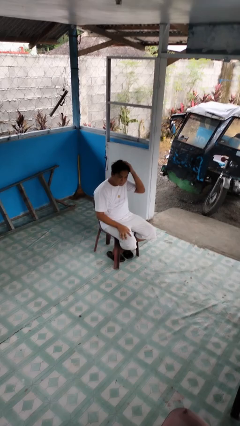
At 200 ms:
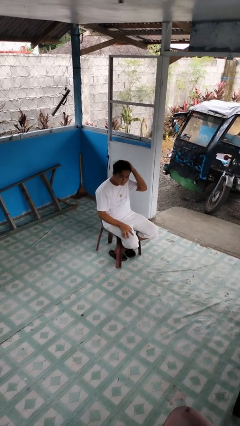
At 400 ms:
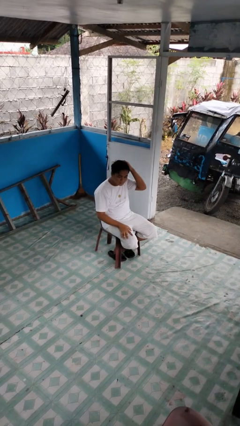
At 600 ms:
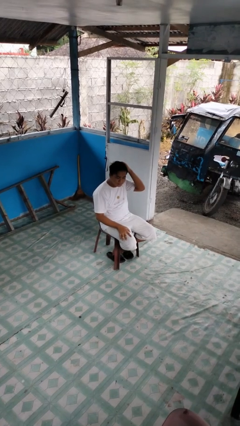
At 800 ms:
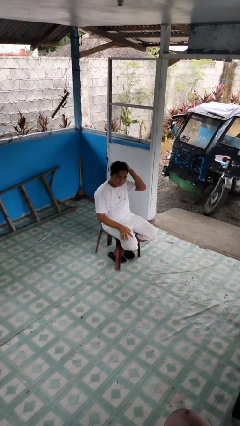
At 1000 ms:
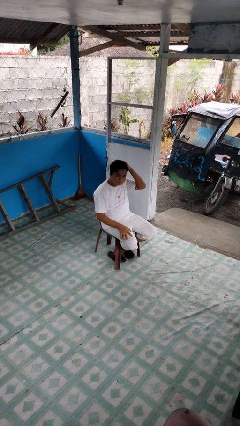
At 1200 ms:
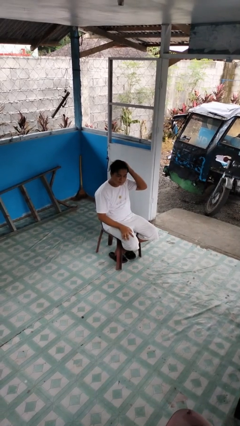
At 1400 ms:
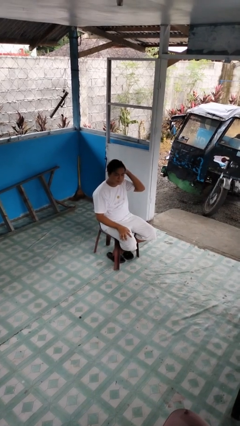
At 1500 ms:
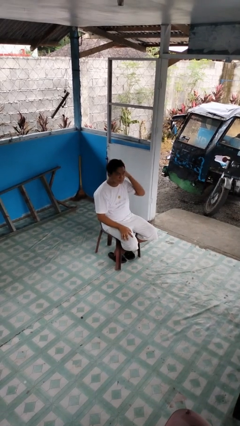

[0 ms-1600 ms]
person pats head

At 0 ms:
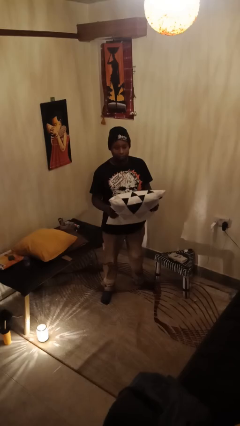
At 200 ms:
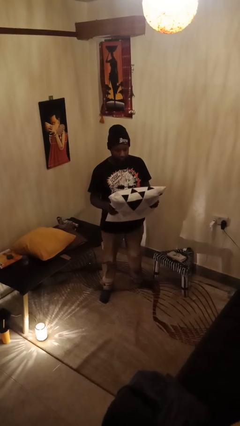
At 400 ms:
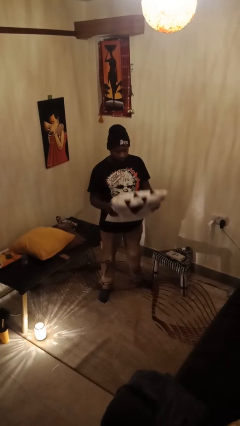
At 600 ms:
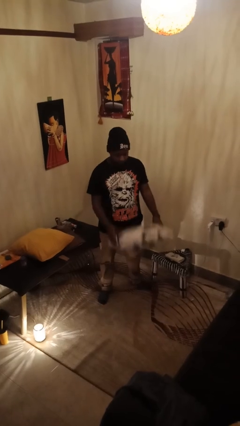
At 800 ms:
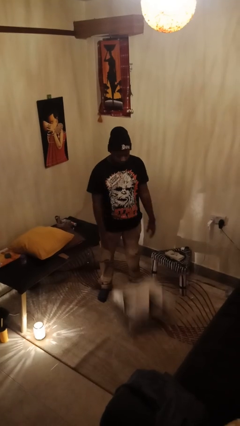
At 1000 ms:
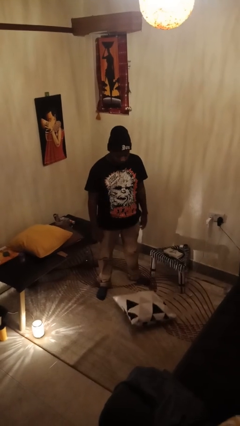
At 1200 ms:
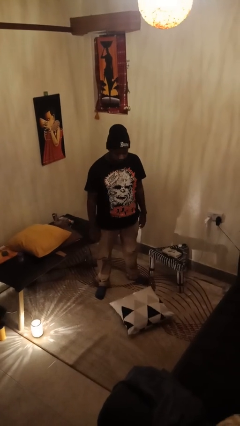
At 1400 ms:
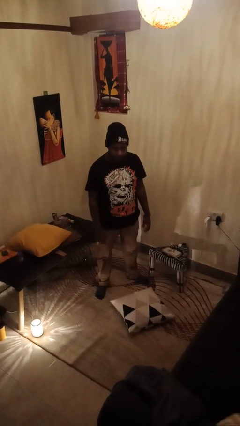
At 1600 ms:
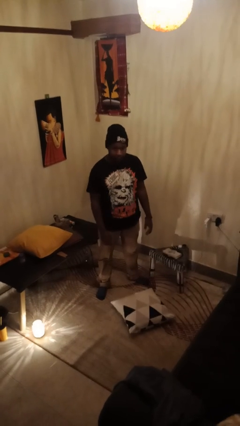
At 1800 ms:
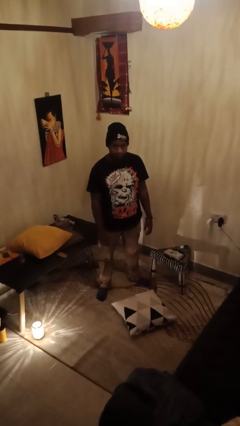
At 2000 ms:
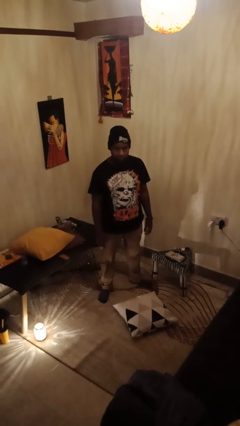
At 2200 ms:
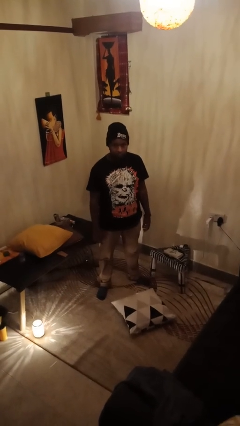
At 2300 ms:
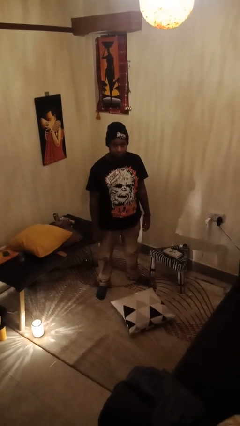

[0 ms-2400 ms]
person drops object

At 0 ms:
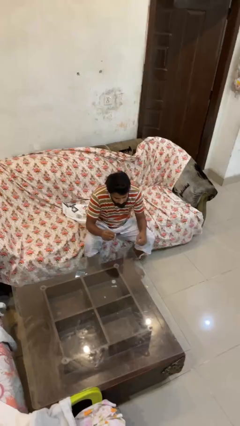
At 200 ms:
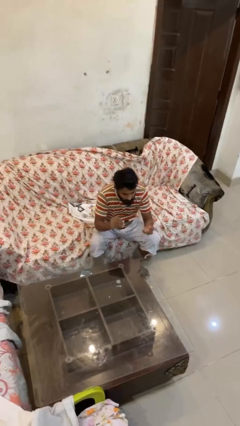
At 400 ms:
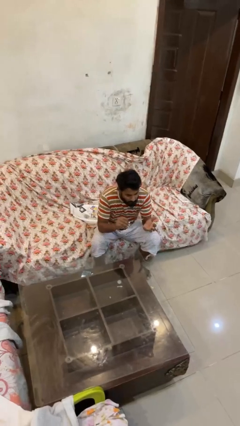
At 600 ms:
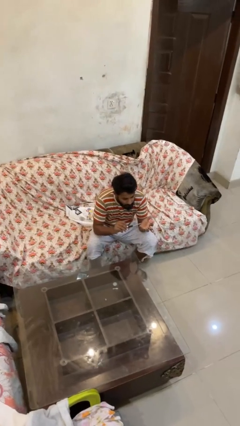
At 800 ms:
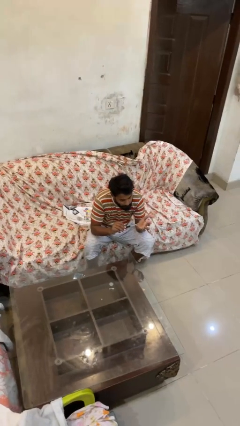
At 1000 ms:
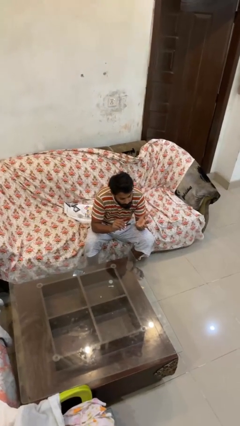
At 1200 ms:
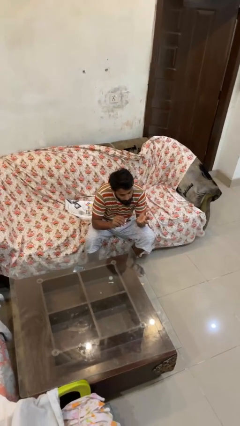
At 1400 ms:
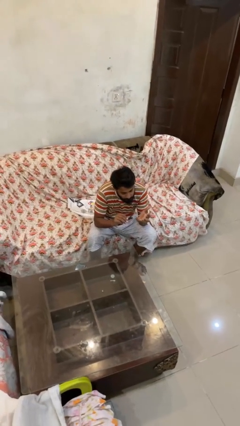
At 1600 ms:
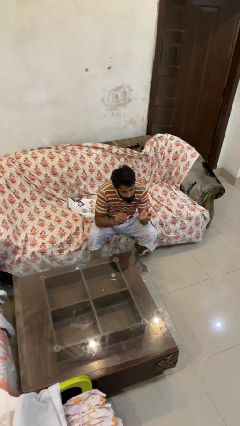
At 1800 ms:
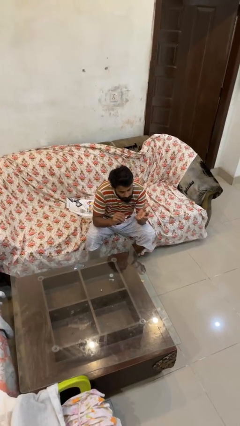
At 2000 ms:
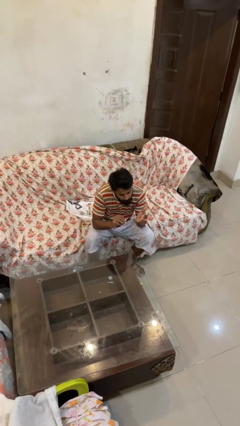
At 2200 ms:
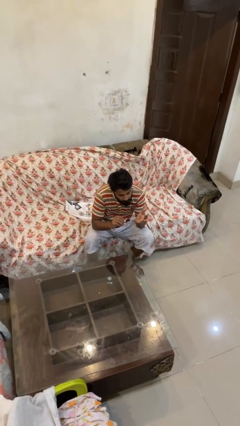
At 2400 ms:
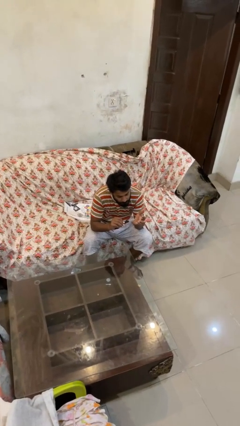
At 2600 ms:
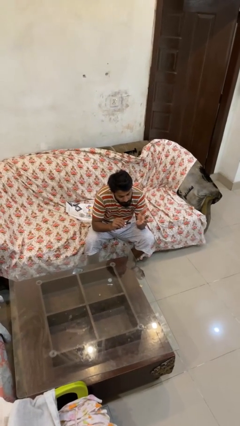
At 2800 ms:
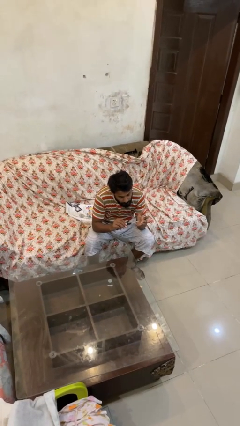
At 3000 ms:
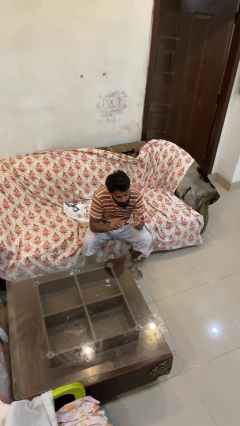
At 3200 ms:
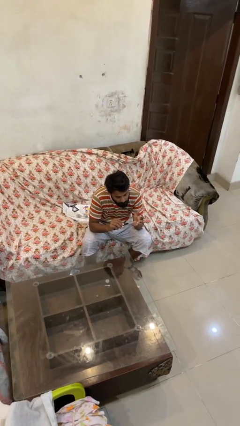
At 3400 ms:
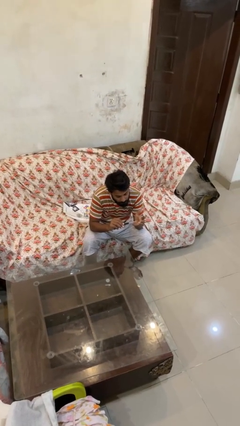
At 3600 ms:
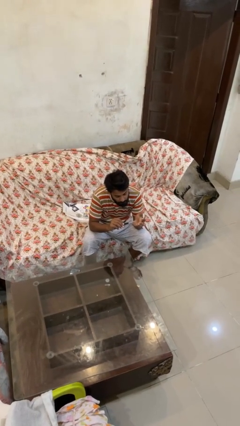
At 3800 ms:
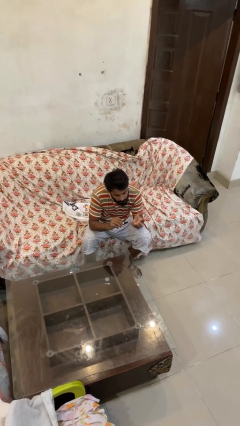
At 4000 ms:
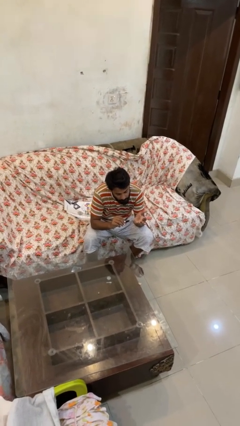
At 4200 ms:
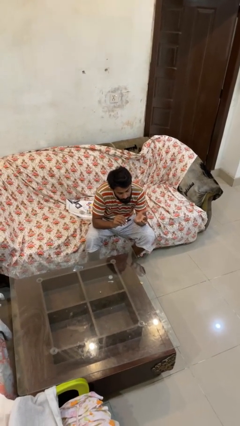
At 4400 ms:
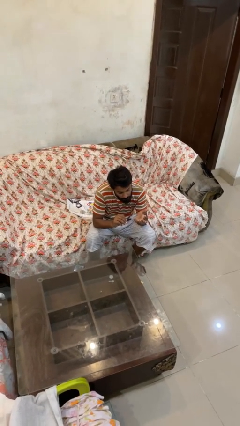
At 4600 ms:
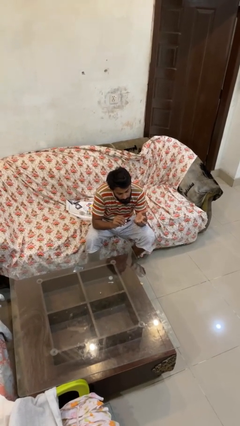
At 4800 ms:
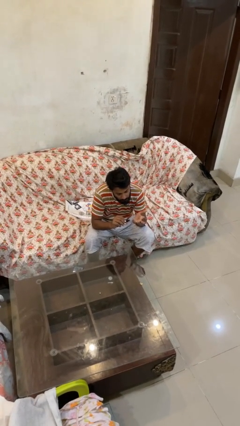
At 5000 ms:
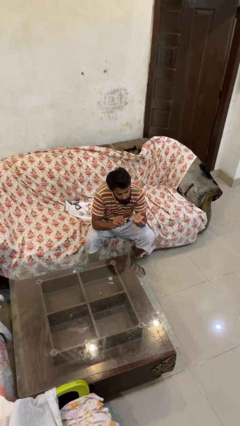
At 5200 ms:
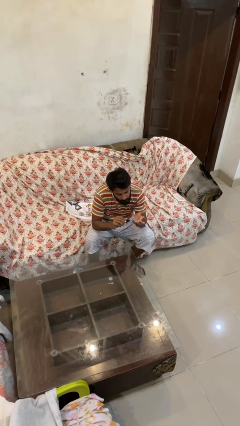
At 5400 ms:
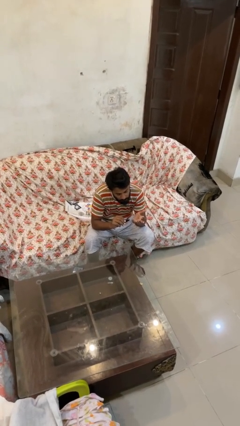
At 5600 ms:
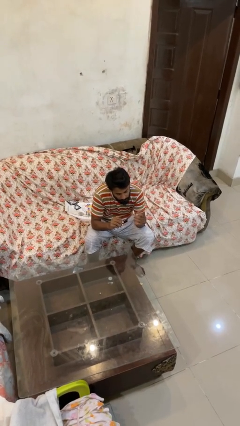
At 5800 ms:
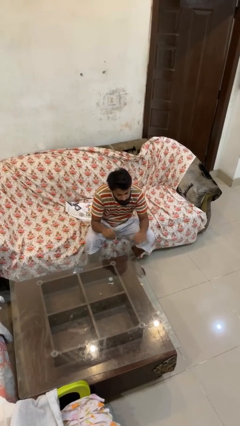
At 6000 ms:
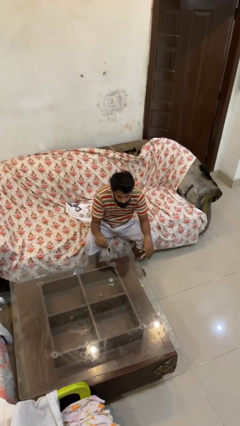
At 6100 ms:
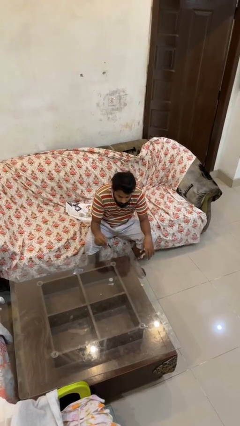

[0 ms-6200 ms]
person files fingernails

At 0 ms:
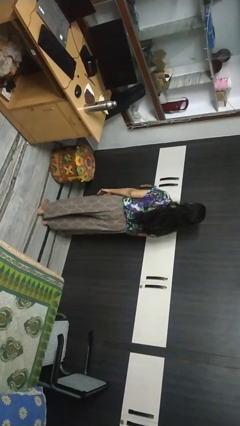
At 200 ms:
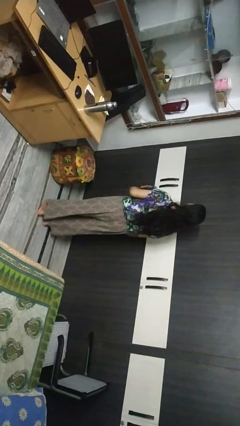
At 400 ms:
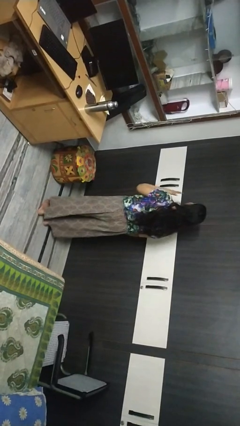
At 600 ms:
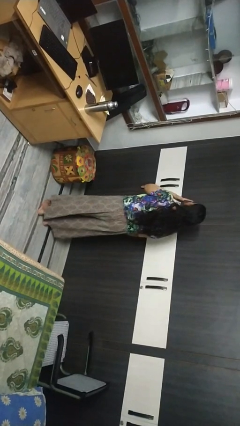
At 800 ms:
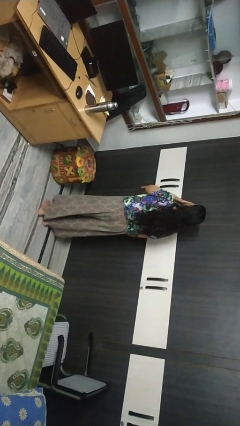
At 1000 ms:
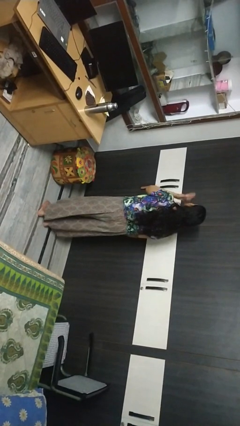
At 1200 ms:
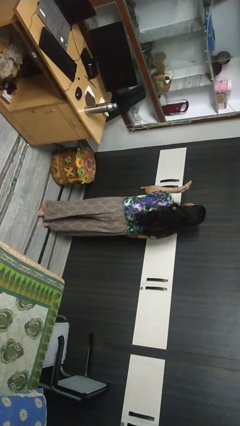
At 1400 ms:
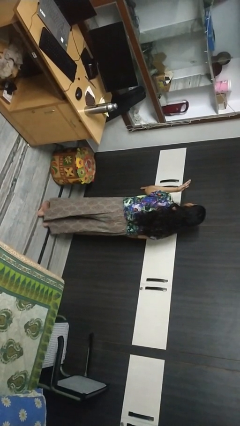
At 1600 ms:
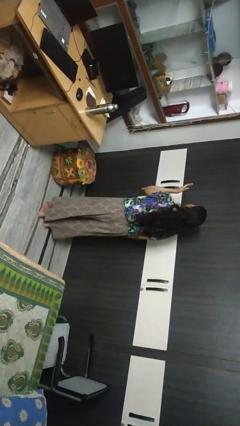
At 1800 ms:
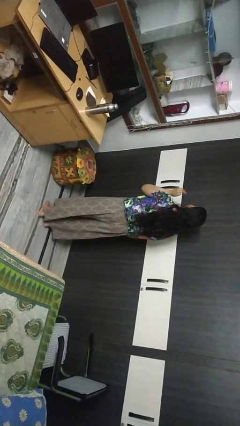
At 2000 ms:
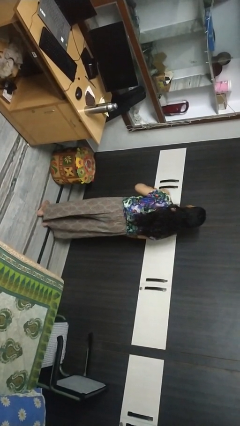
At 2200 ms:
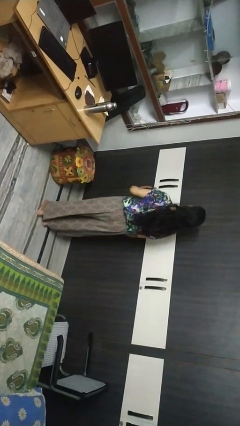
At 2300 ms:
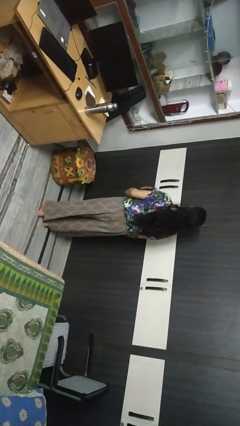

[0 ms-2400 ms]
person gestures blow kiss

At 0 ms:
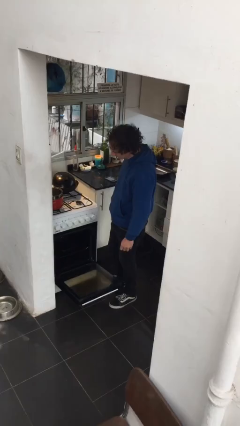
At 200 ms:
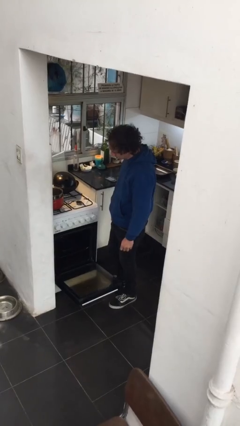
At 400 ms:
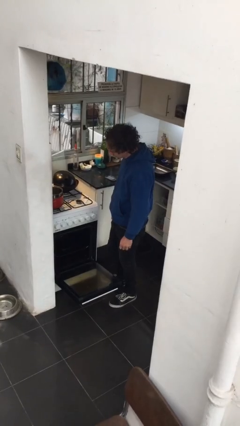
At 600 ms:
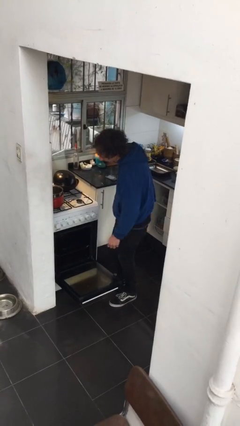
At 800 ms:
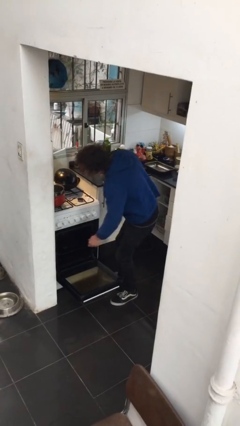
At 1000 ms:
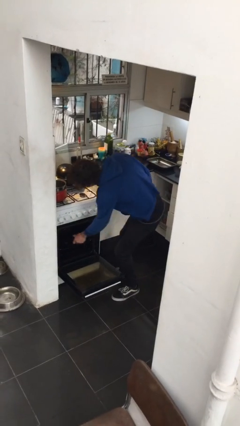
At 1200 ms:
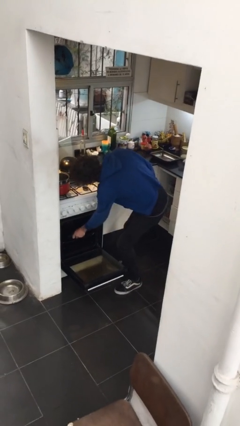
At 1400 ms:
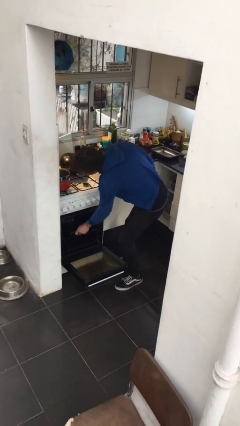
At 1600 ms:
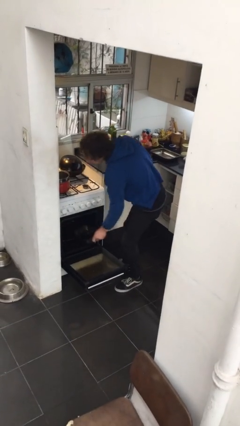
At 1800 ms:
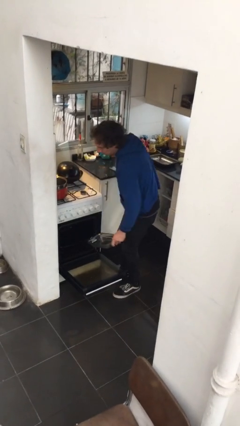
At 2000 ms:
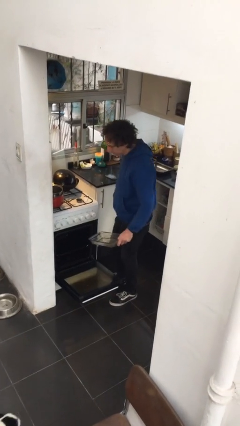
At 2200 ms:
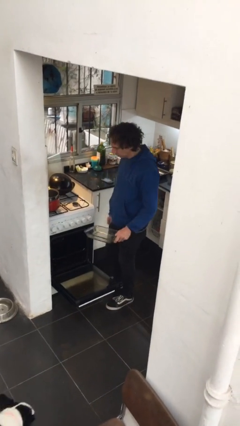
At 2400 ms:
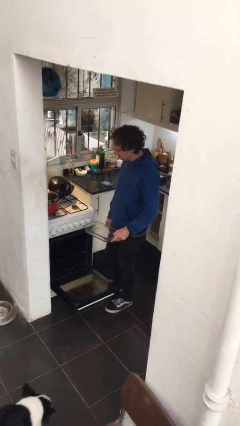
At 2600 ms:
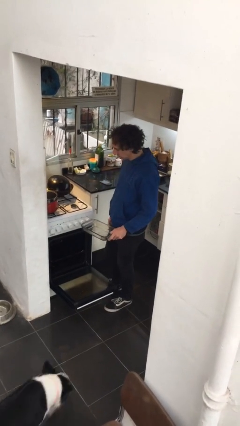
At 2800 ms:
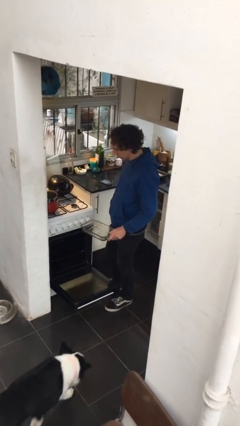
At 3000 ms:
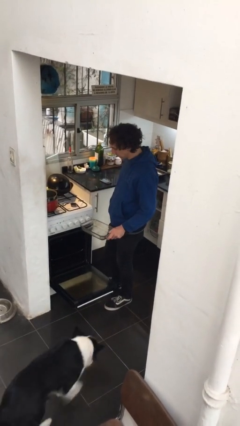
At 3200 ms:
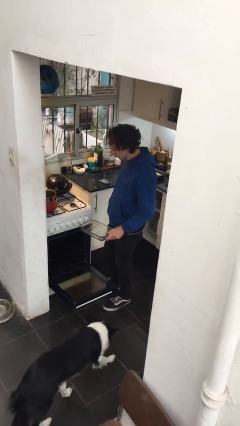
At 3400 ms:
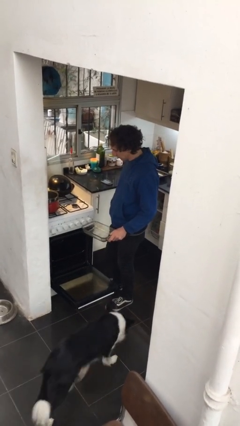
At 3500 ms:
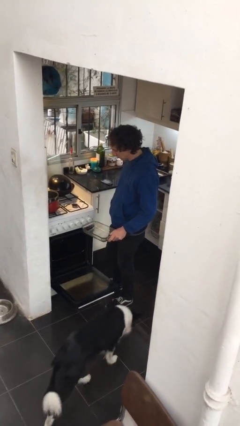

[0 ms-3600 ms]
person takes object from oven

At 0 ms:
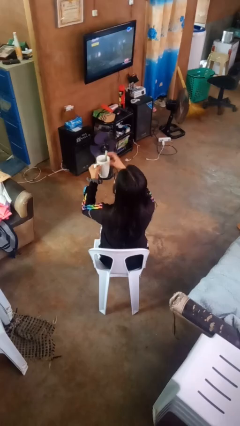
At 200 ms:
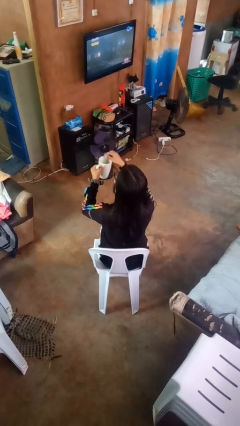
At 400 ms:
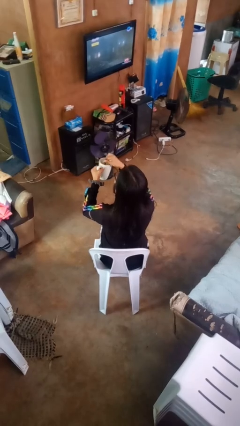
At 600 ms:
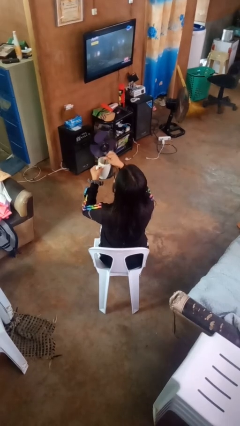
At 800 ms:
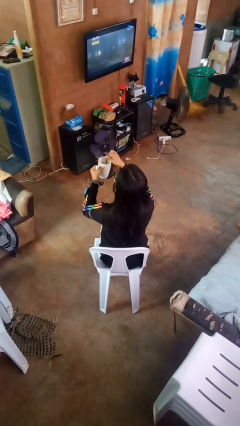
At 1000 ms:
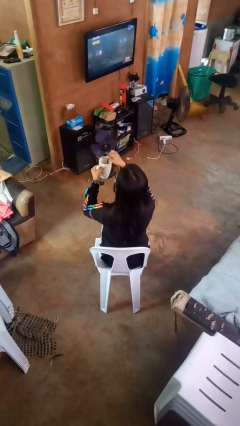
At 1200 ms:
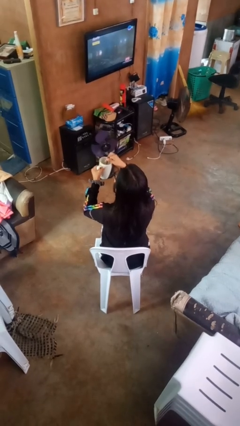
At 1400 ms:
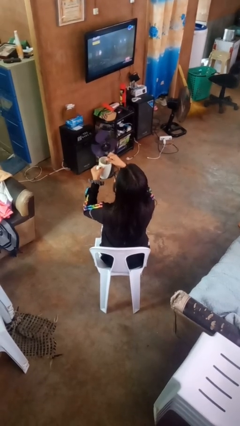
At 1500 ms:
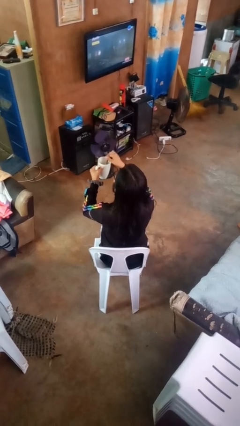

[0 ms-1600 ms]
person stirs mug
